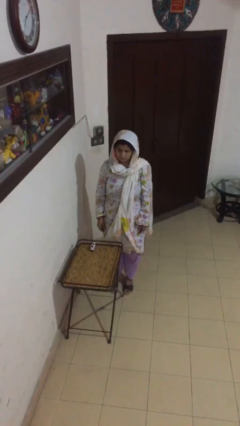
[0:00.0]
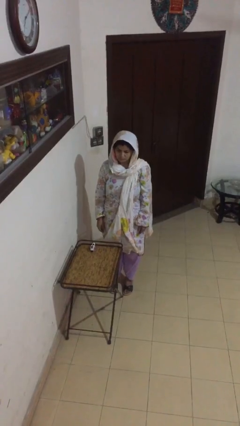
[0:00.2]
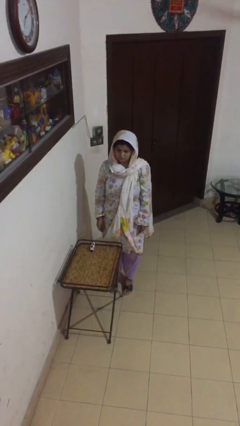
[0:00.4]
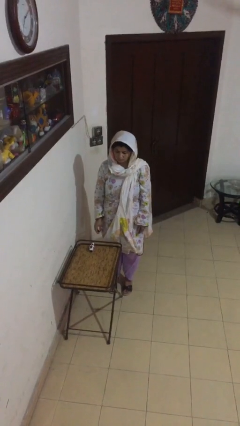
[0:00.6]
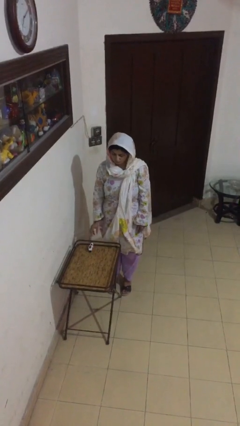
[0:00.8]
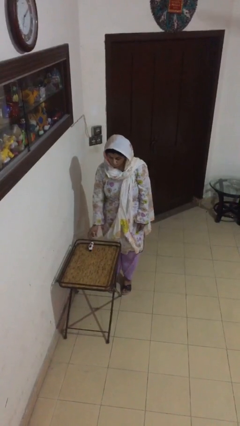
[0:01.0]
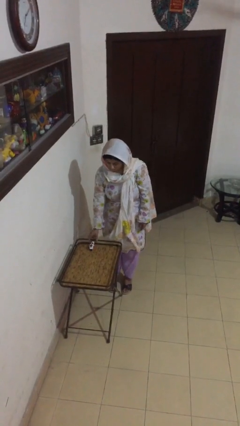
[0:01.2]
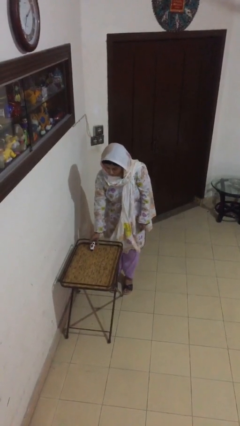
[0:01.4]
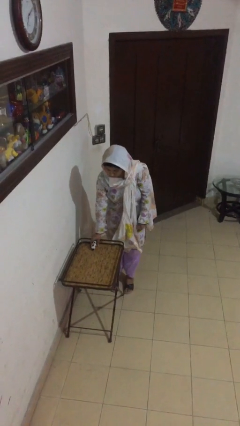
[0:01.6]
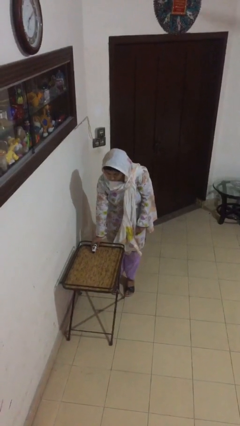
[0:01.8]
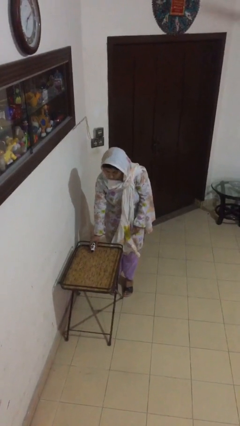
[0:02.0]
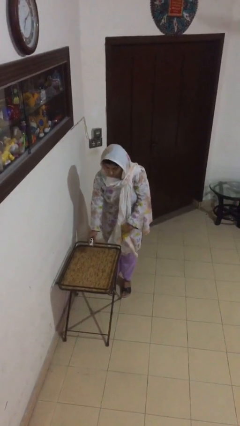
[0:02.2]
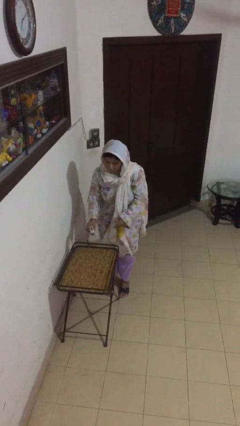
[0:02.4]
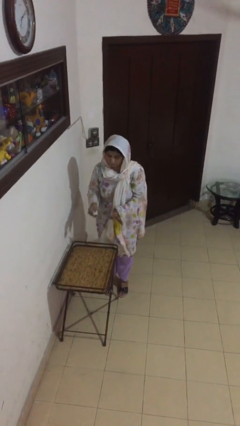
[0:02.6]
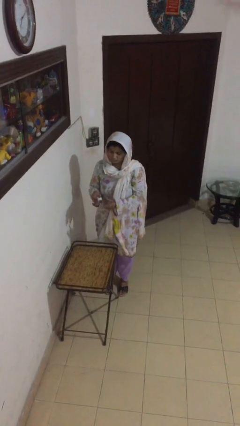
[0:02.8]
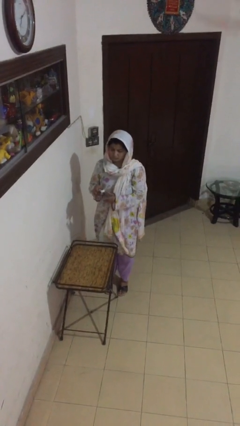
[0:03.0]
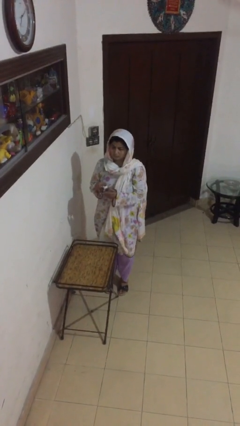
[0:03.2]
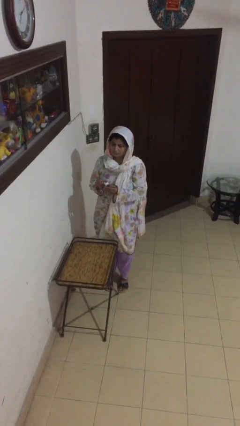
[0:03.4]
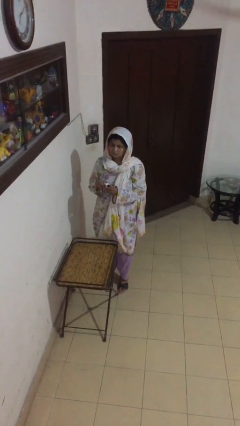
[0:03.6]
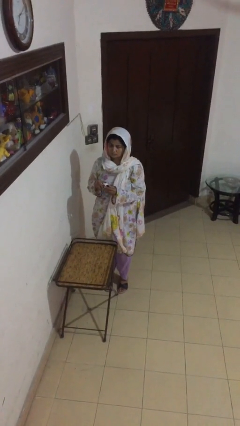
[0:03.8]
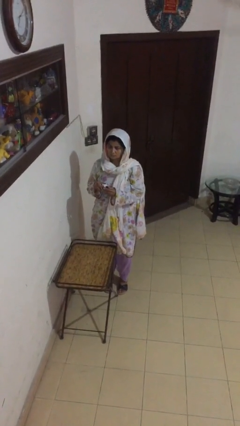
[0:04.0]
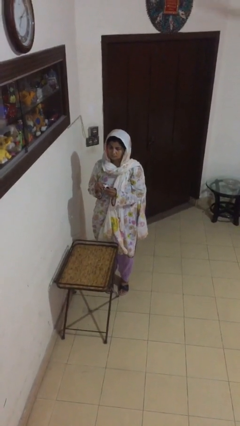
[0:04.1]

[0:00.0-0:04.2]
person picks up object from table

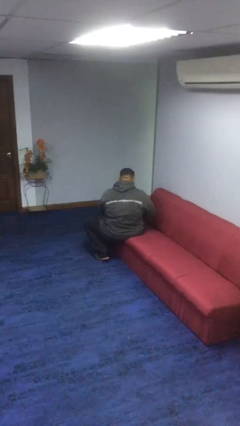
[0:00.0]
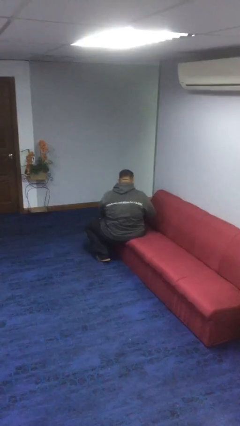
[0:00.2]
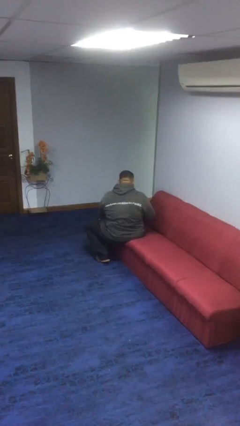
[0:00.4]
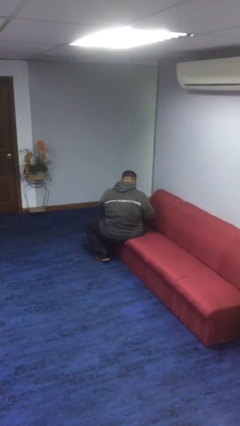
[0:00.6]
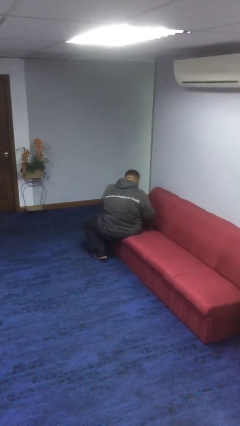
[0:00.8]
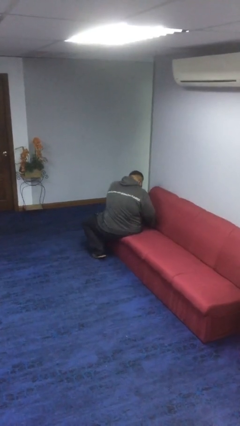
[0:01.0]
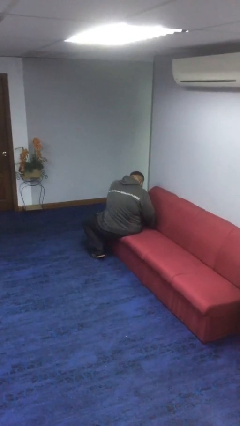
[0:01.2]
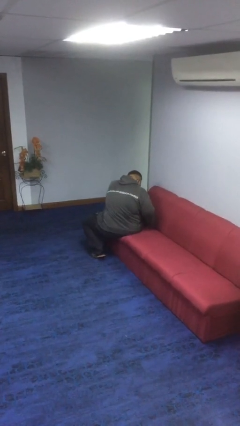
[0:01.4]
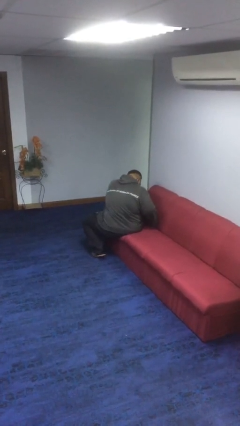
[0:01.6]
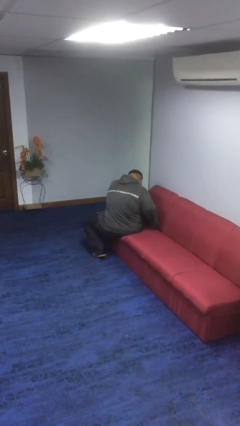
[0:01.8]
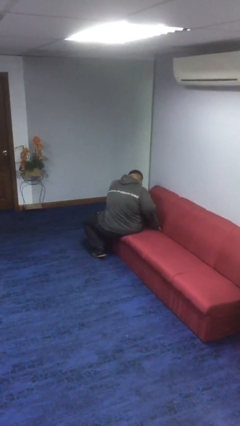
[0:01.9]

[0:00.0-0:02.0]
person searches in couch

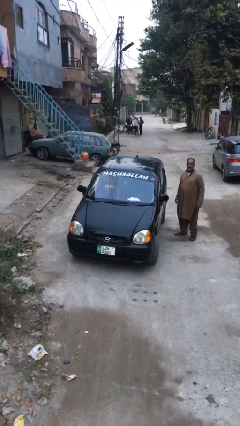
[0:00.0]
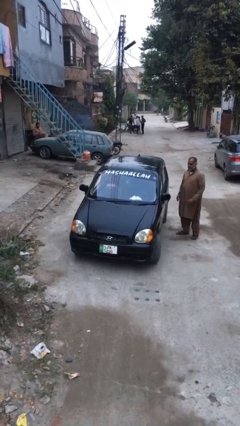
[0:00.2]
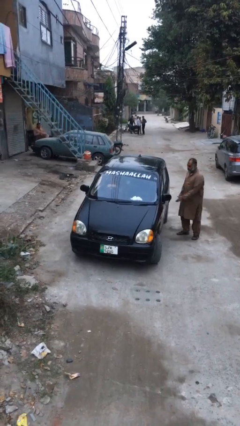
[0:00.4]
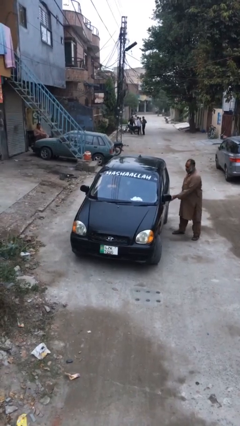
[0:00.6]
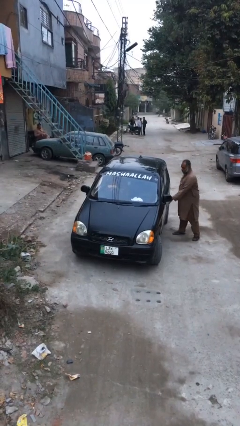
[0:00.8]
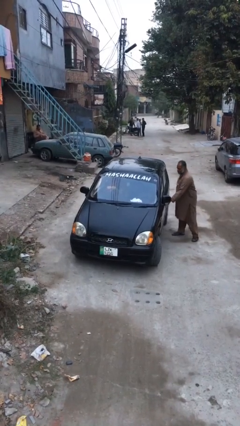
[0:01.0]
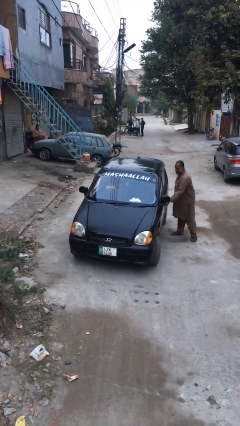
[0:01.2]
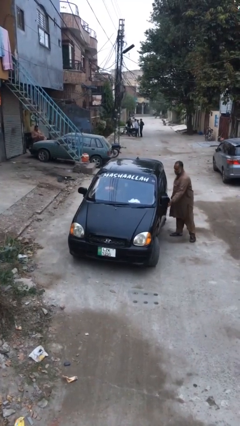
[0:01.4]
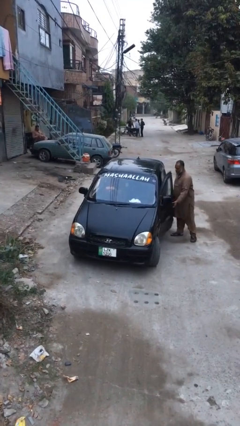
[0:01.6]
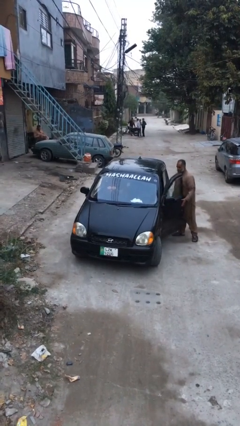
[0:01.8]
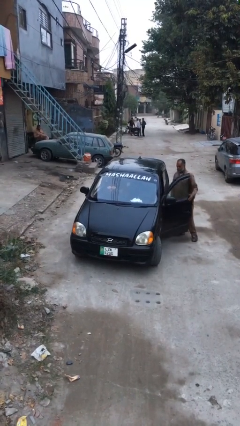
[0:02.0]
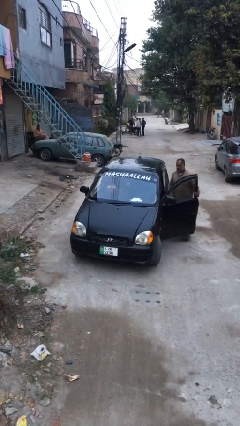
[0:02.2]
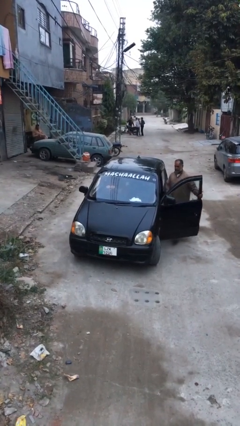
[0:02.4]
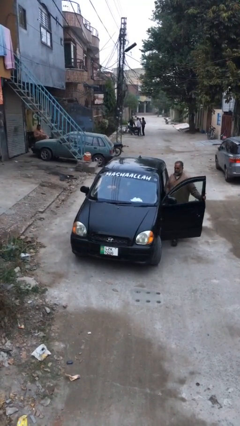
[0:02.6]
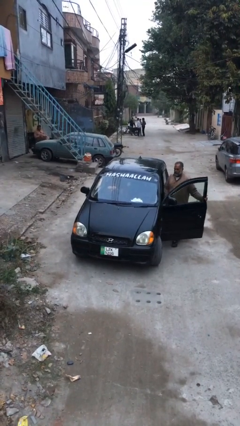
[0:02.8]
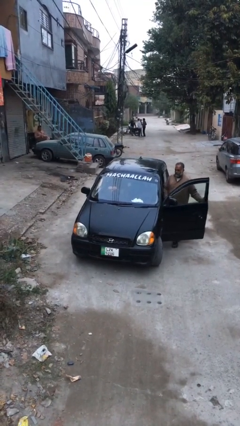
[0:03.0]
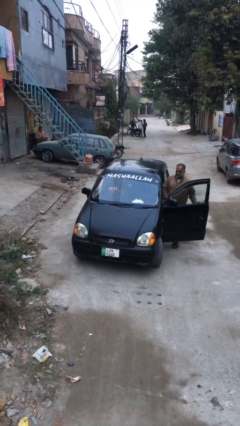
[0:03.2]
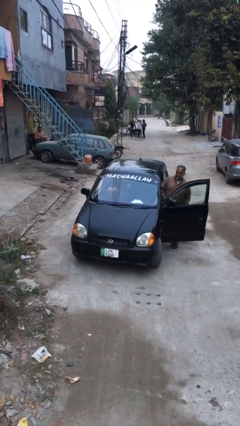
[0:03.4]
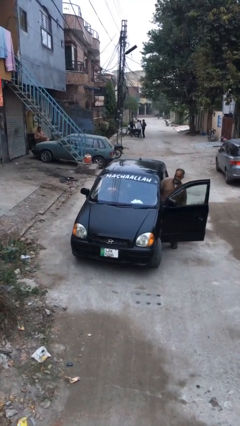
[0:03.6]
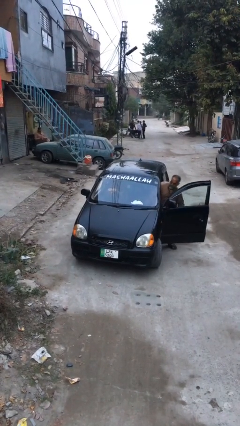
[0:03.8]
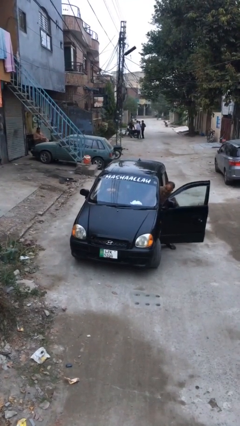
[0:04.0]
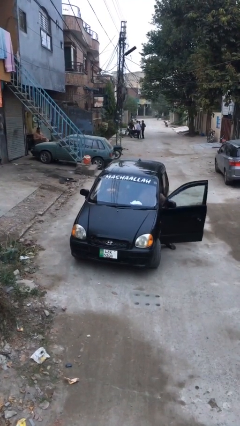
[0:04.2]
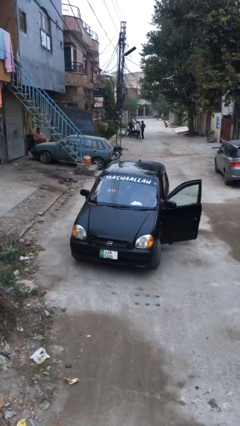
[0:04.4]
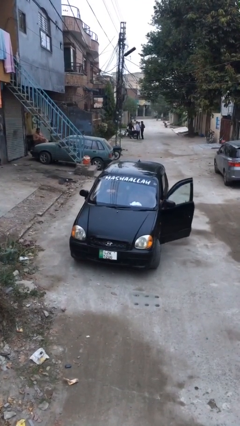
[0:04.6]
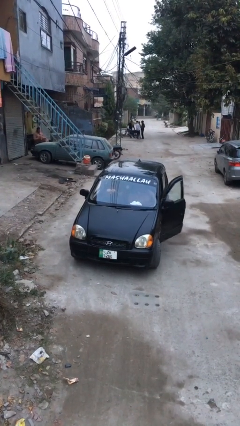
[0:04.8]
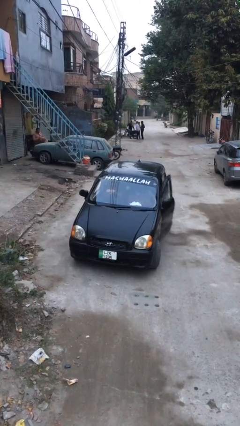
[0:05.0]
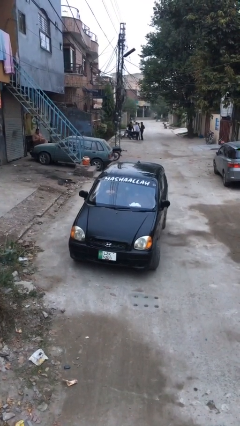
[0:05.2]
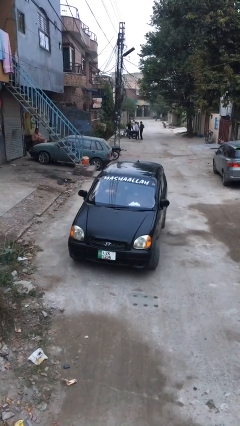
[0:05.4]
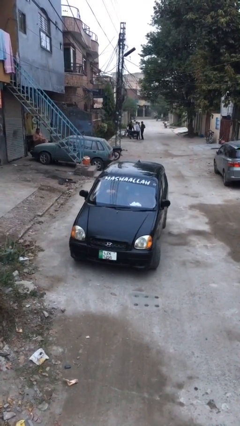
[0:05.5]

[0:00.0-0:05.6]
car picks up person

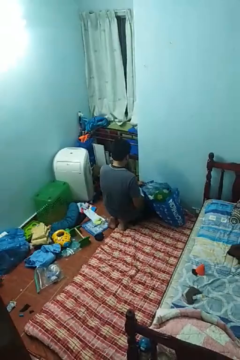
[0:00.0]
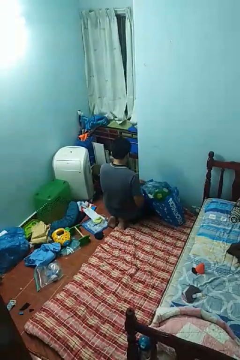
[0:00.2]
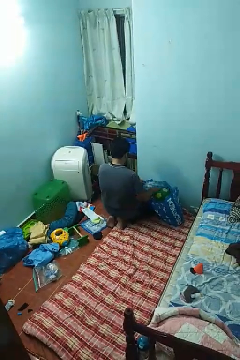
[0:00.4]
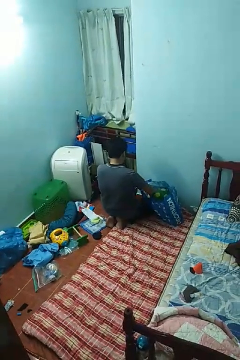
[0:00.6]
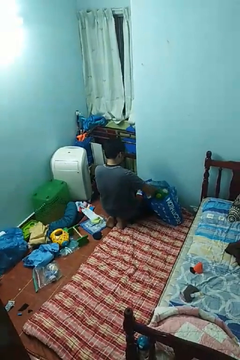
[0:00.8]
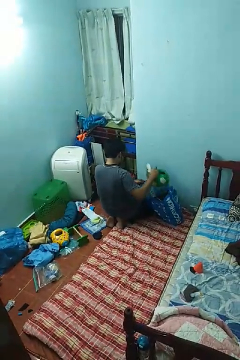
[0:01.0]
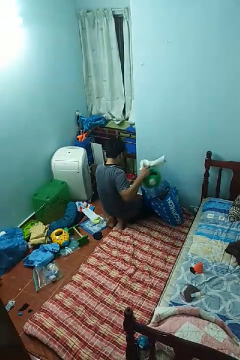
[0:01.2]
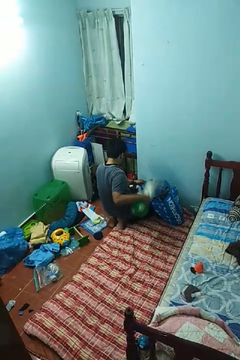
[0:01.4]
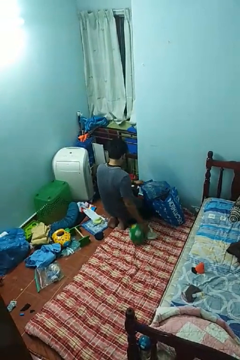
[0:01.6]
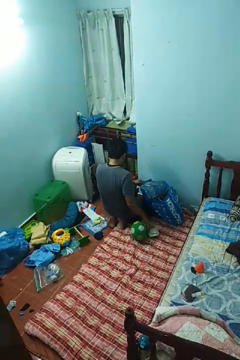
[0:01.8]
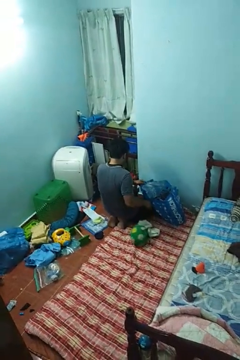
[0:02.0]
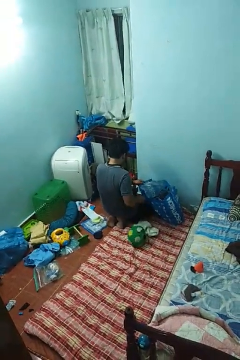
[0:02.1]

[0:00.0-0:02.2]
person takes object from bag

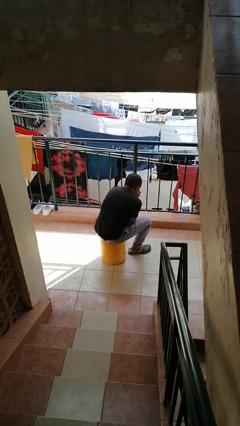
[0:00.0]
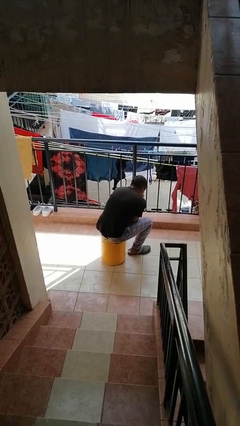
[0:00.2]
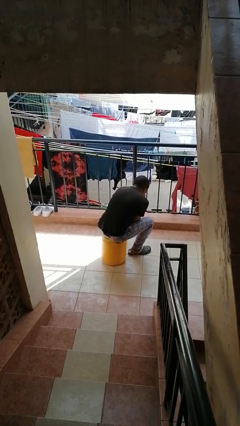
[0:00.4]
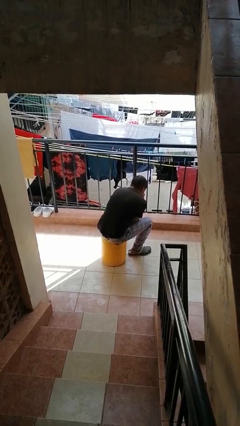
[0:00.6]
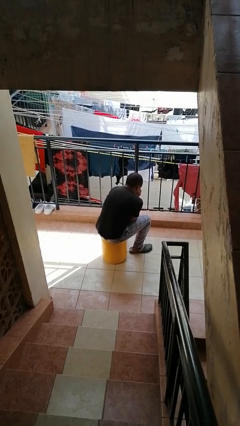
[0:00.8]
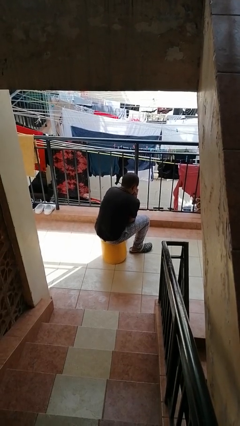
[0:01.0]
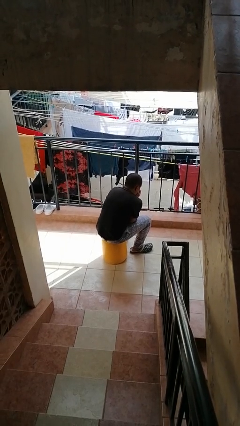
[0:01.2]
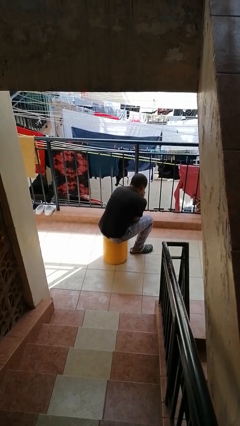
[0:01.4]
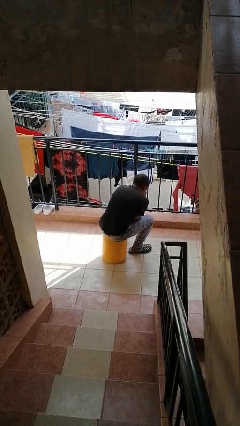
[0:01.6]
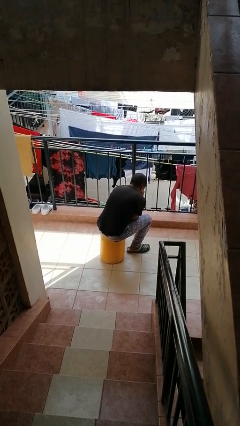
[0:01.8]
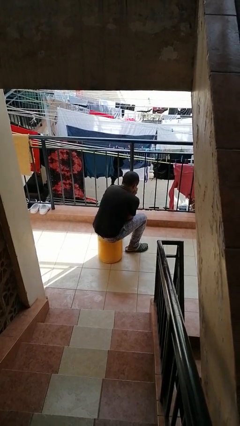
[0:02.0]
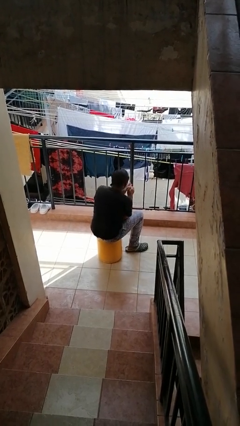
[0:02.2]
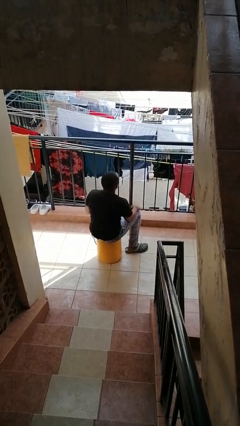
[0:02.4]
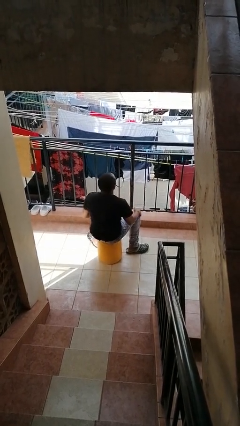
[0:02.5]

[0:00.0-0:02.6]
person blows into hands

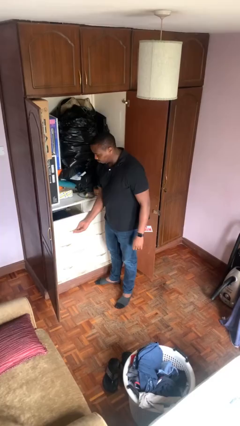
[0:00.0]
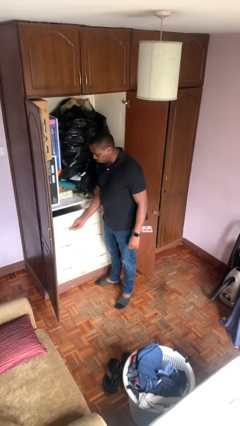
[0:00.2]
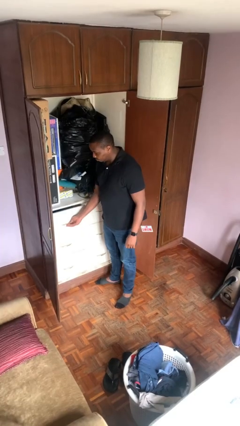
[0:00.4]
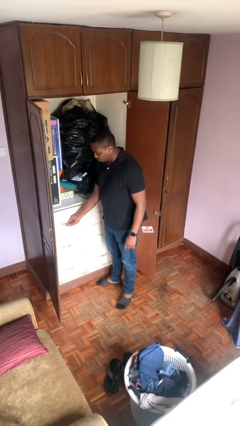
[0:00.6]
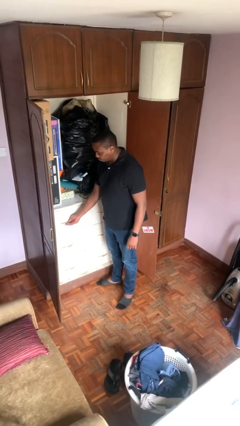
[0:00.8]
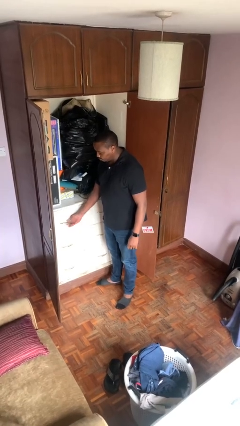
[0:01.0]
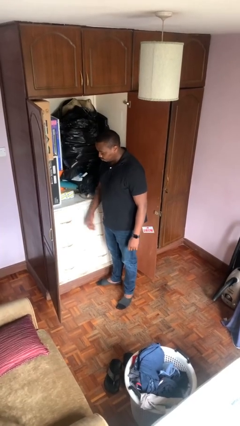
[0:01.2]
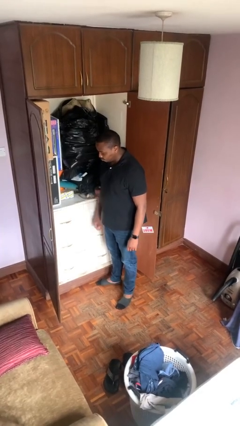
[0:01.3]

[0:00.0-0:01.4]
person closes dresser drawer

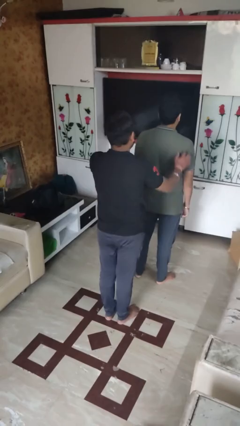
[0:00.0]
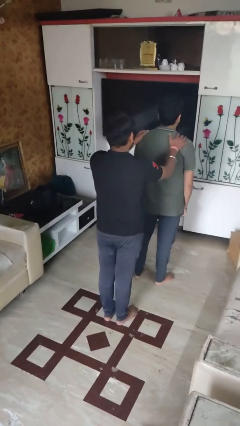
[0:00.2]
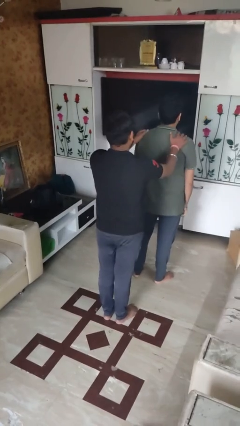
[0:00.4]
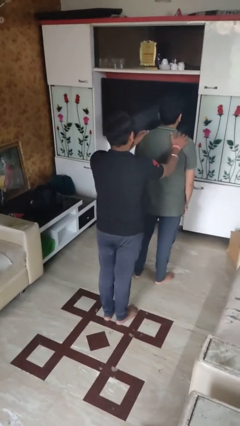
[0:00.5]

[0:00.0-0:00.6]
person grabs person by shoulder
